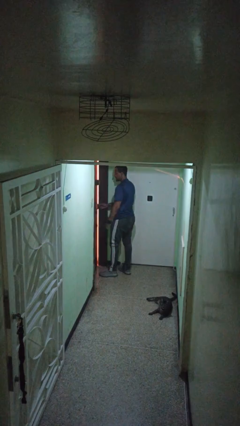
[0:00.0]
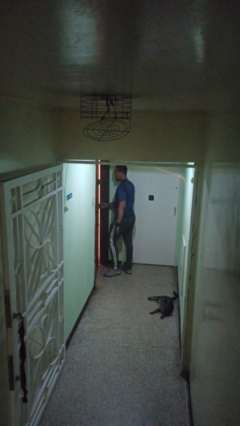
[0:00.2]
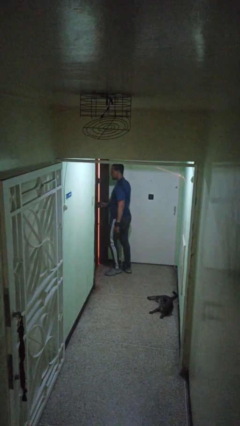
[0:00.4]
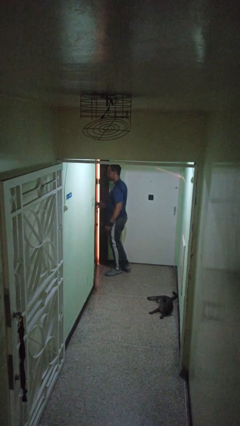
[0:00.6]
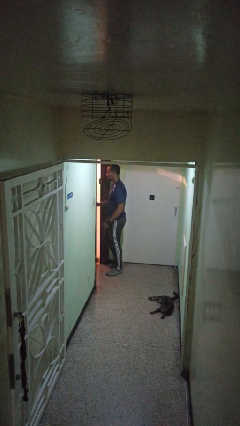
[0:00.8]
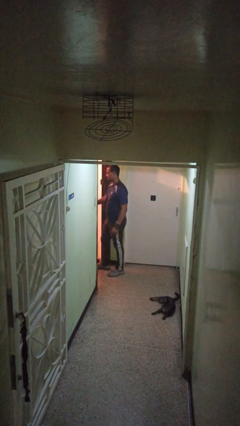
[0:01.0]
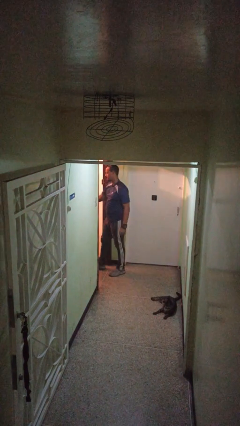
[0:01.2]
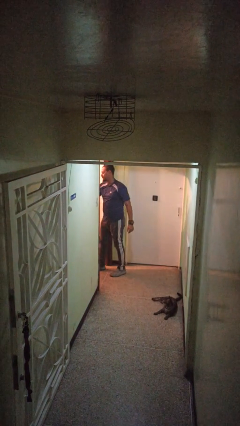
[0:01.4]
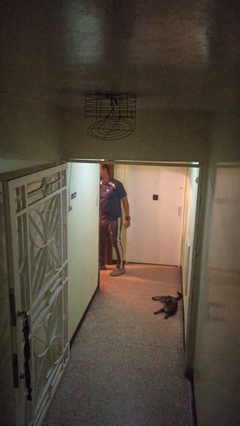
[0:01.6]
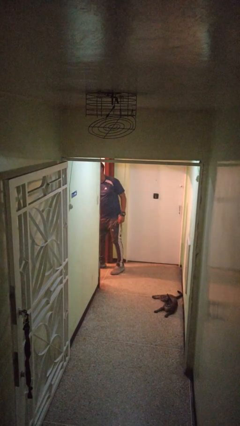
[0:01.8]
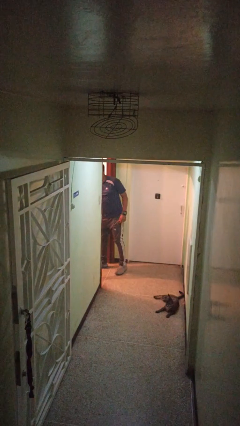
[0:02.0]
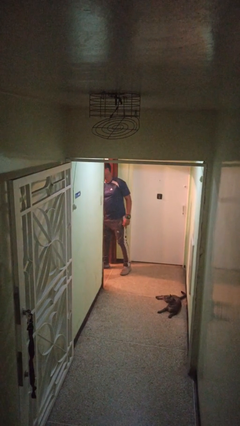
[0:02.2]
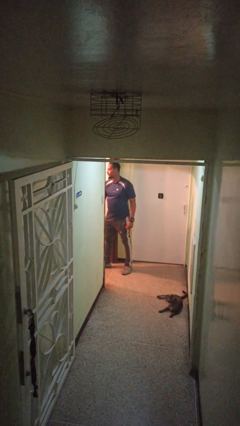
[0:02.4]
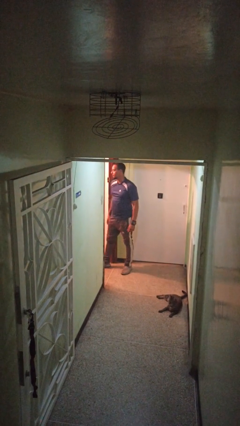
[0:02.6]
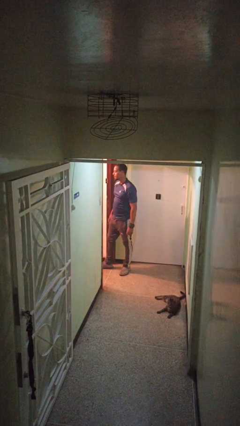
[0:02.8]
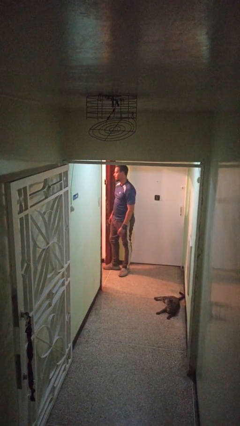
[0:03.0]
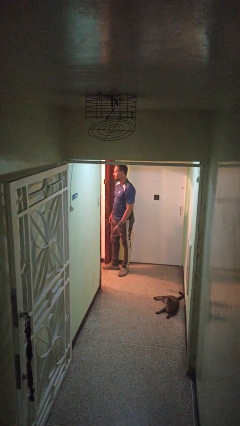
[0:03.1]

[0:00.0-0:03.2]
person opens facility door

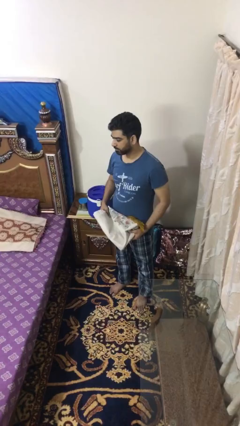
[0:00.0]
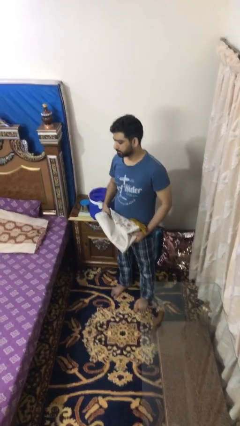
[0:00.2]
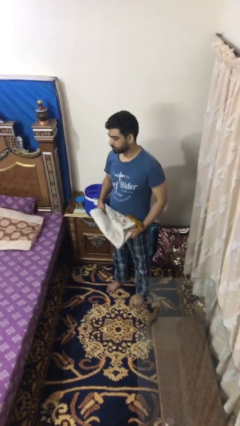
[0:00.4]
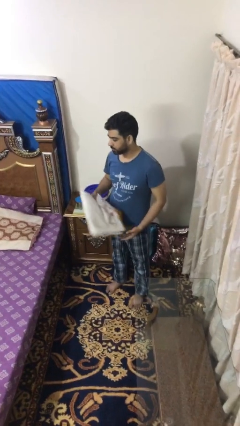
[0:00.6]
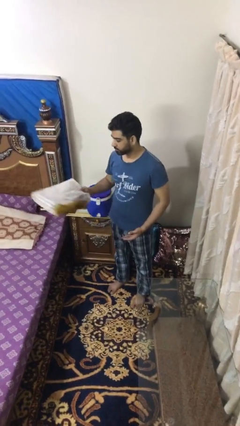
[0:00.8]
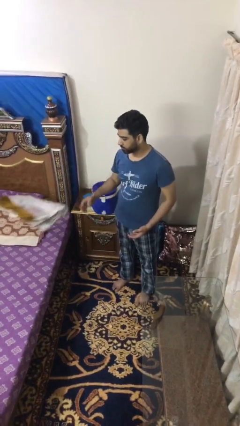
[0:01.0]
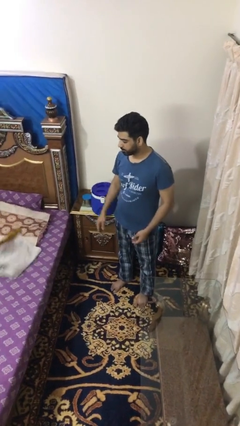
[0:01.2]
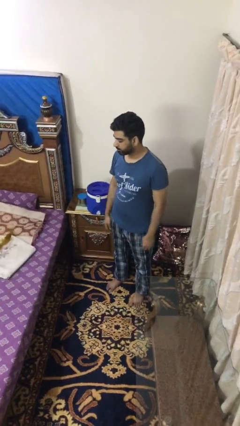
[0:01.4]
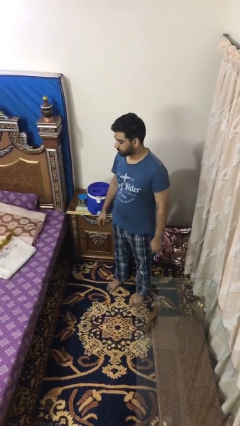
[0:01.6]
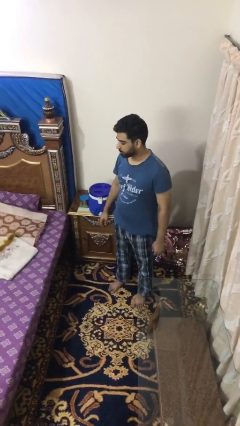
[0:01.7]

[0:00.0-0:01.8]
person throws object on bed

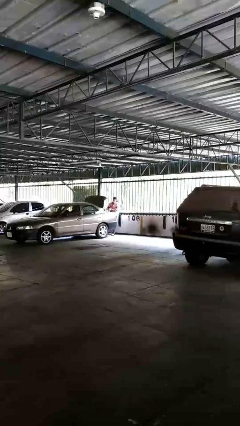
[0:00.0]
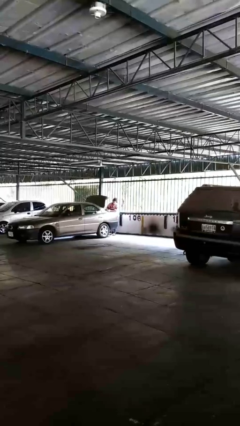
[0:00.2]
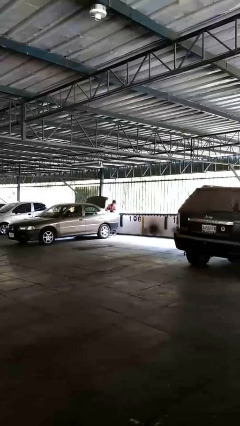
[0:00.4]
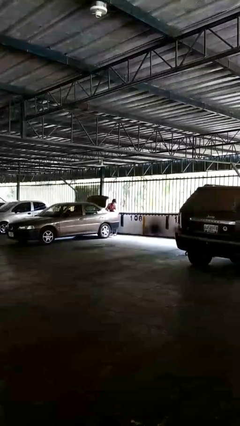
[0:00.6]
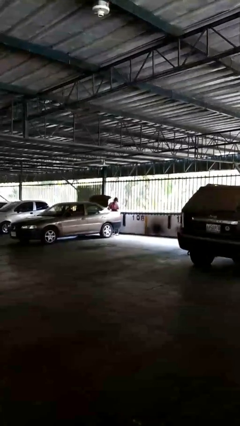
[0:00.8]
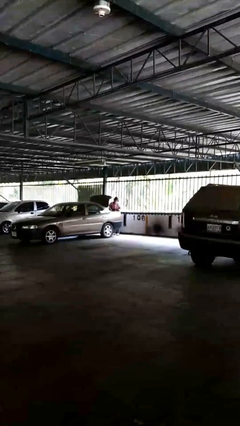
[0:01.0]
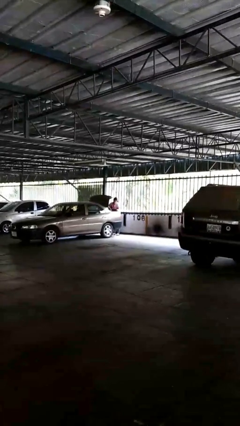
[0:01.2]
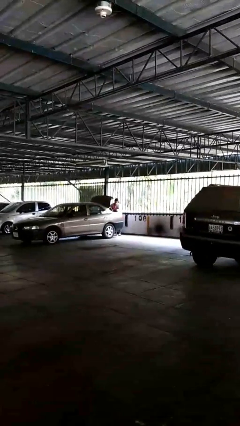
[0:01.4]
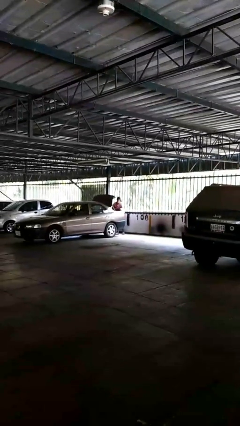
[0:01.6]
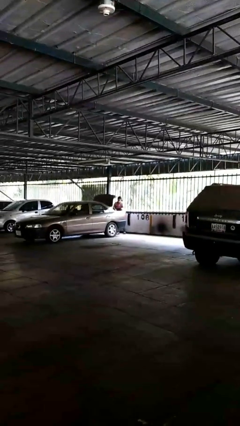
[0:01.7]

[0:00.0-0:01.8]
person loads car

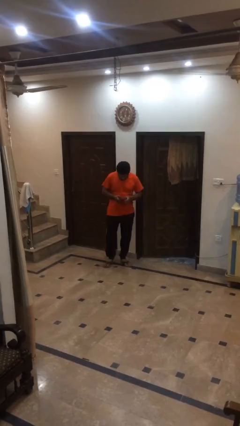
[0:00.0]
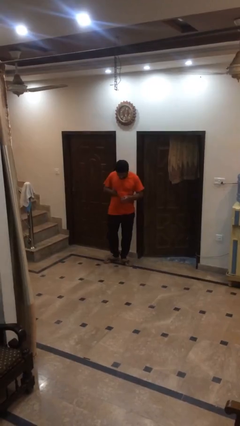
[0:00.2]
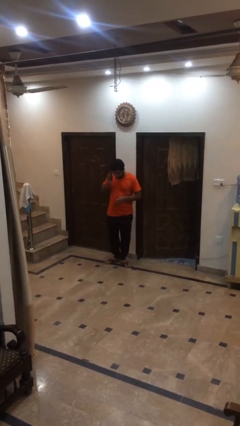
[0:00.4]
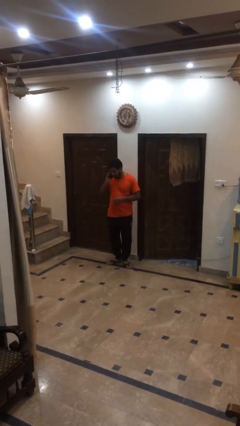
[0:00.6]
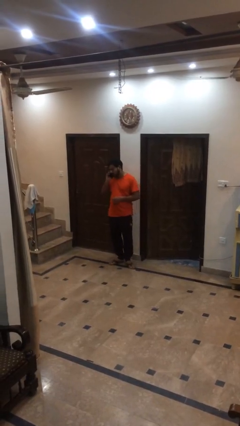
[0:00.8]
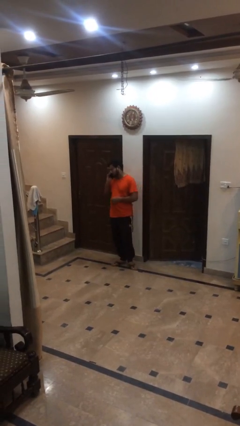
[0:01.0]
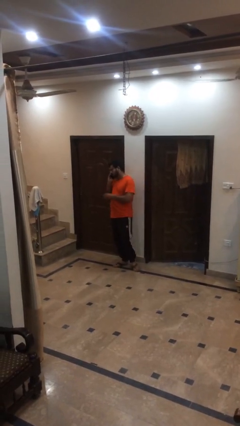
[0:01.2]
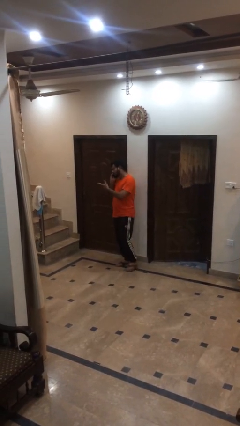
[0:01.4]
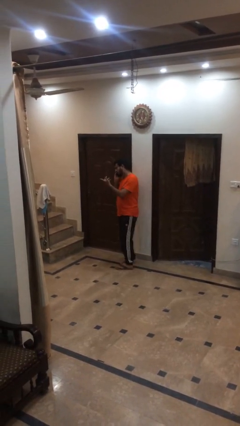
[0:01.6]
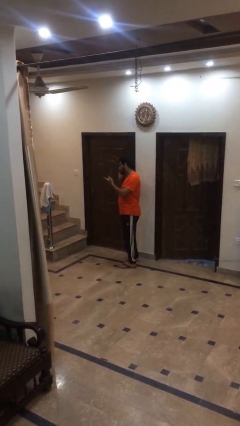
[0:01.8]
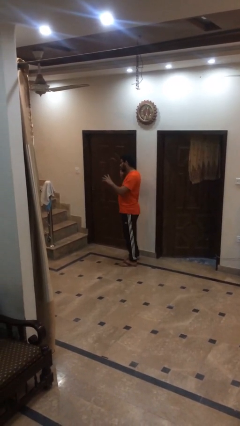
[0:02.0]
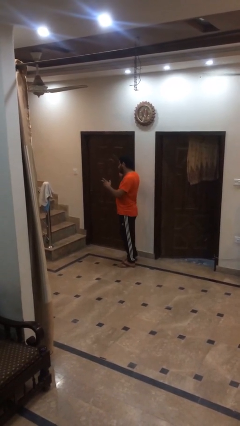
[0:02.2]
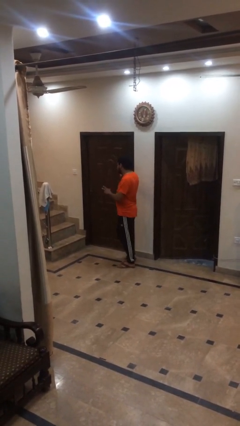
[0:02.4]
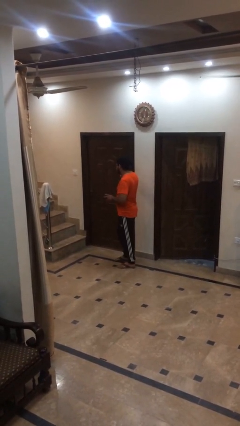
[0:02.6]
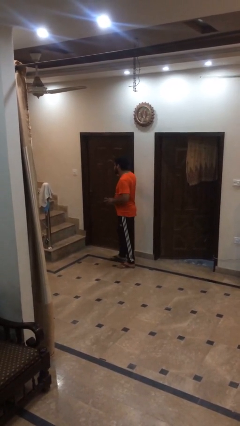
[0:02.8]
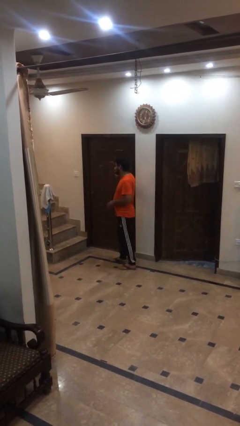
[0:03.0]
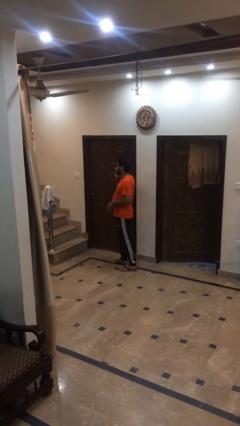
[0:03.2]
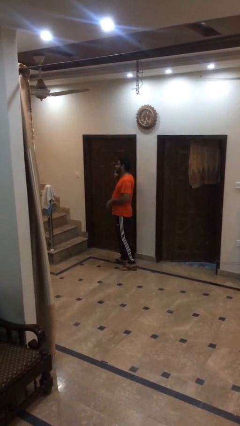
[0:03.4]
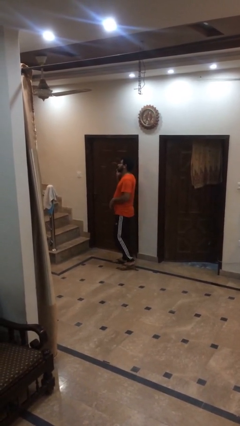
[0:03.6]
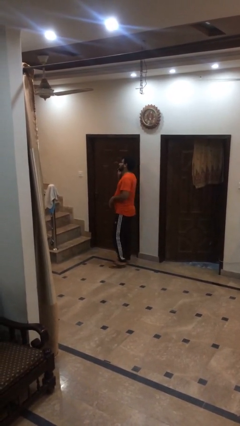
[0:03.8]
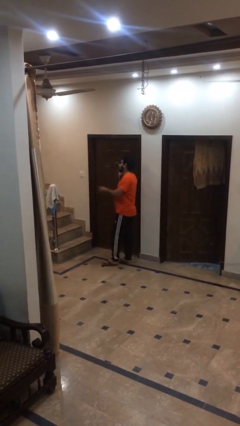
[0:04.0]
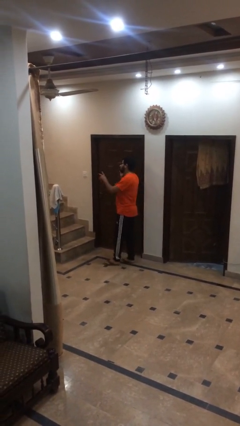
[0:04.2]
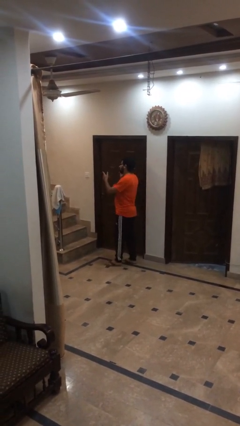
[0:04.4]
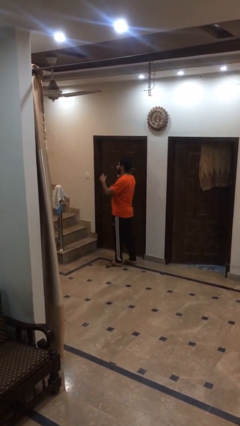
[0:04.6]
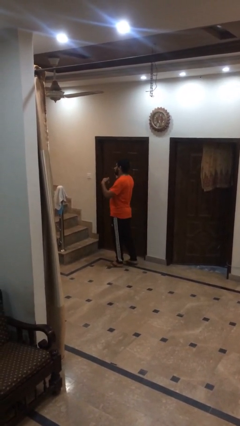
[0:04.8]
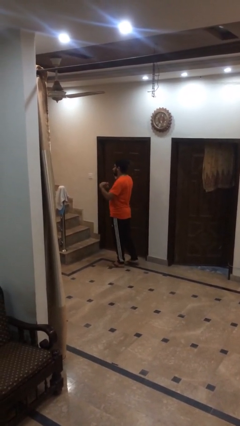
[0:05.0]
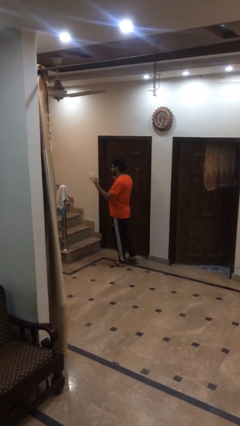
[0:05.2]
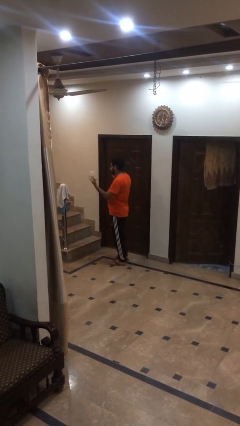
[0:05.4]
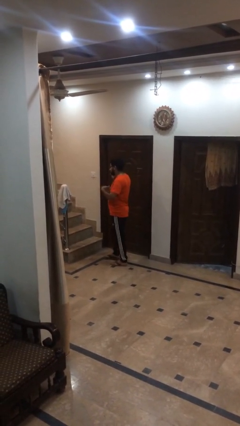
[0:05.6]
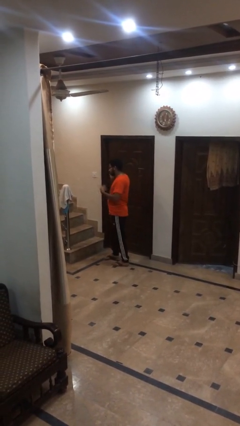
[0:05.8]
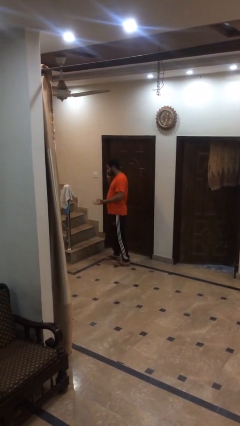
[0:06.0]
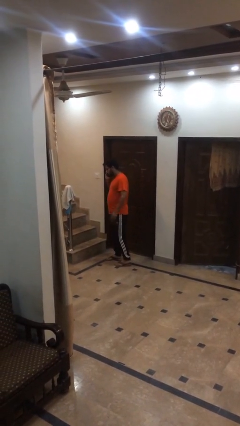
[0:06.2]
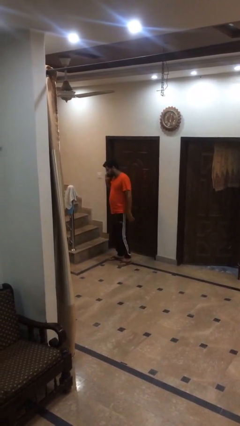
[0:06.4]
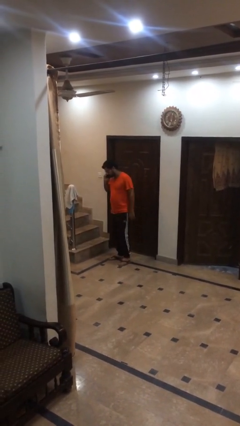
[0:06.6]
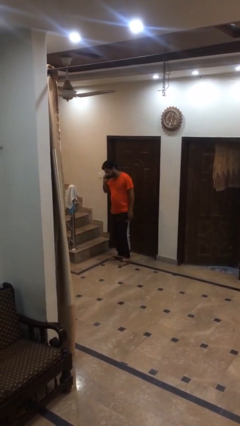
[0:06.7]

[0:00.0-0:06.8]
person talks on phone

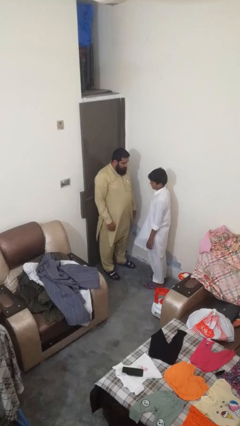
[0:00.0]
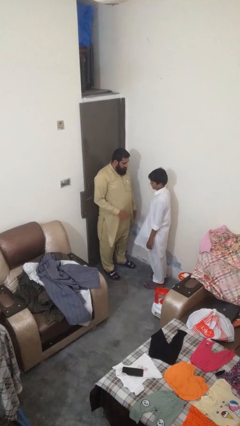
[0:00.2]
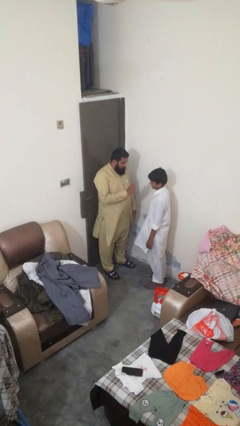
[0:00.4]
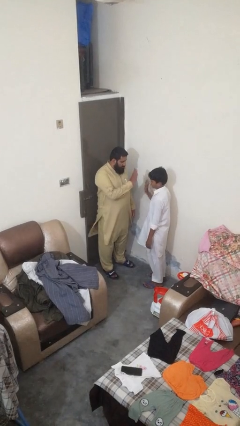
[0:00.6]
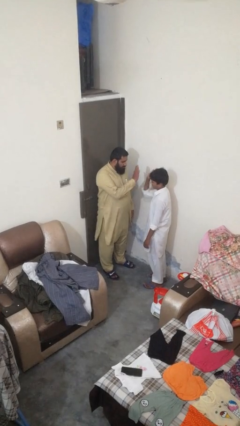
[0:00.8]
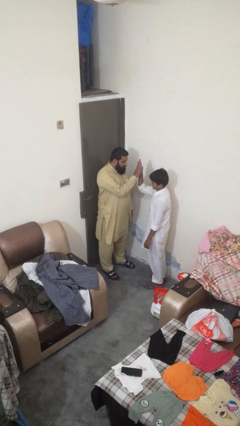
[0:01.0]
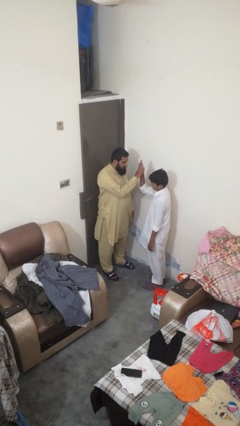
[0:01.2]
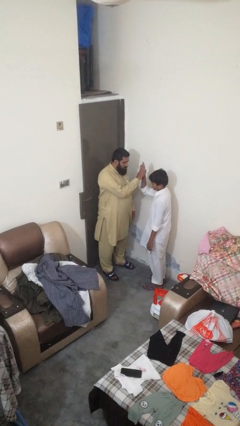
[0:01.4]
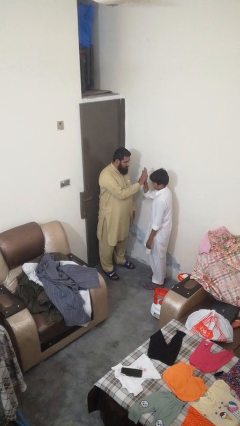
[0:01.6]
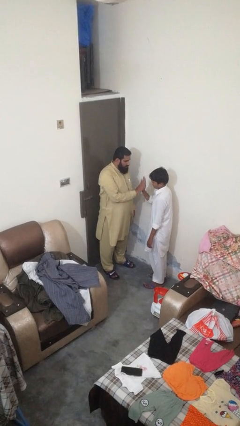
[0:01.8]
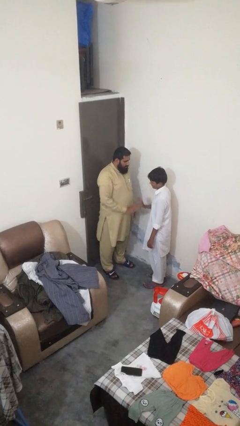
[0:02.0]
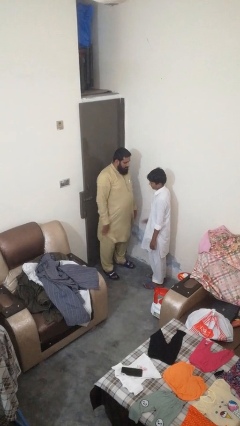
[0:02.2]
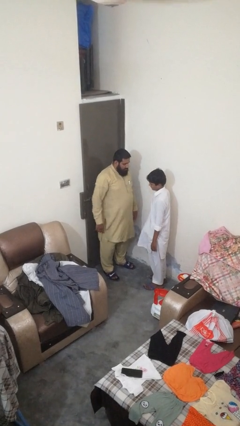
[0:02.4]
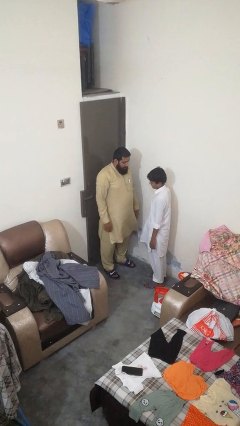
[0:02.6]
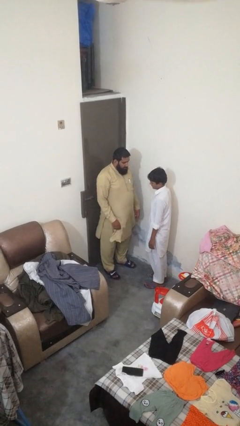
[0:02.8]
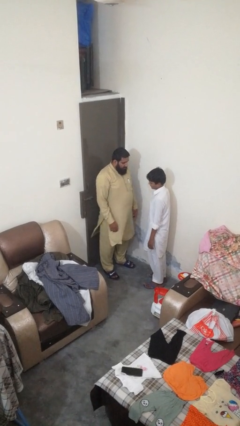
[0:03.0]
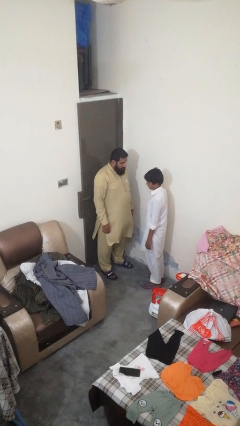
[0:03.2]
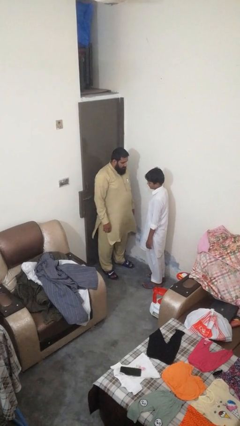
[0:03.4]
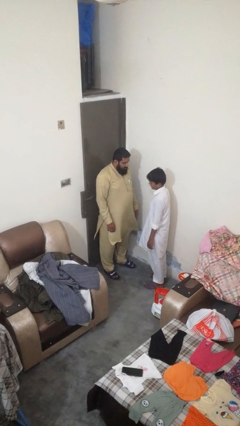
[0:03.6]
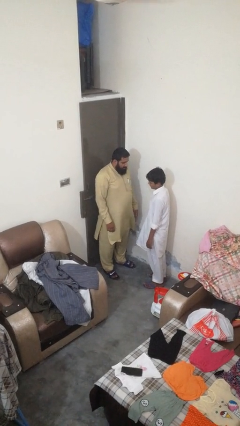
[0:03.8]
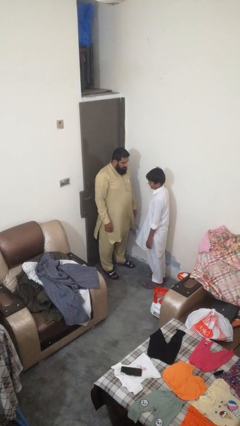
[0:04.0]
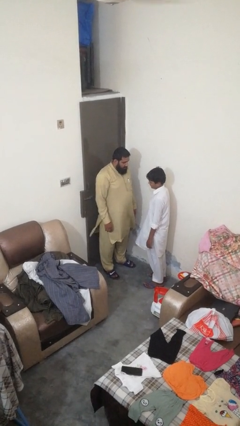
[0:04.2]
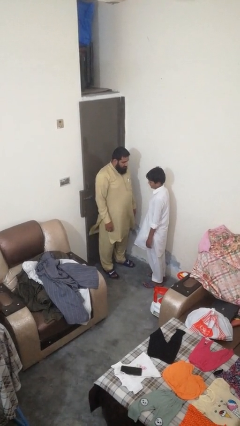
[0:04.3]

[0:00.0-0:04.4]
person highfives hand
